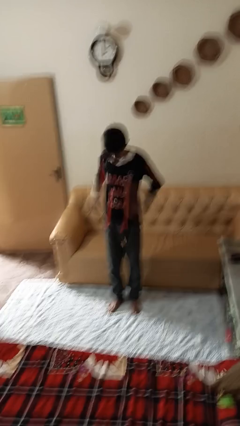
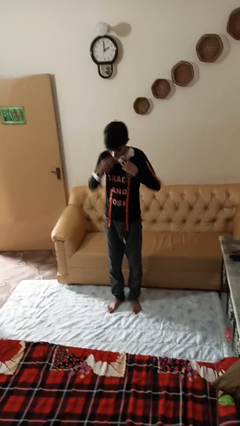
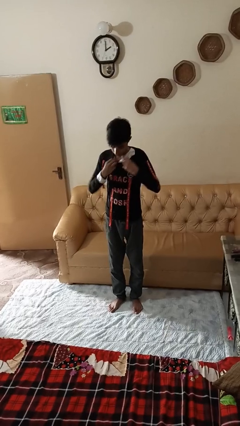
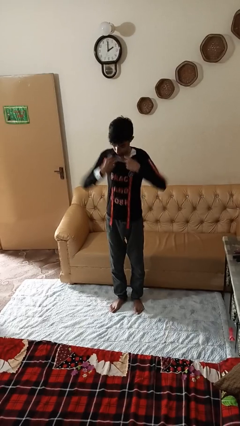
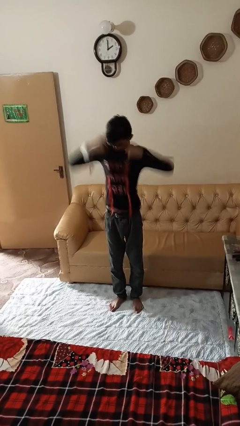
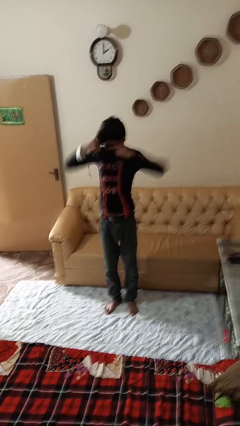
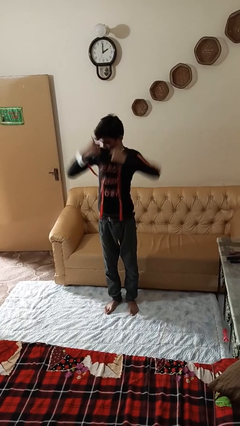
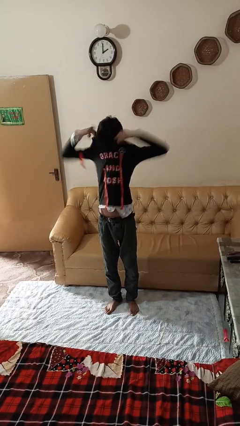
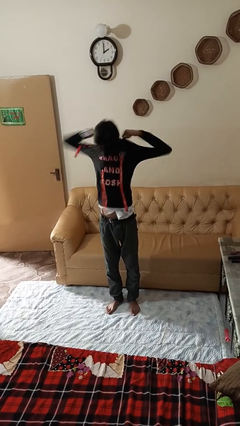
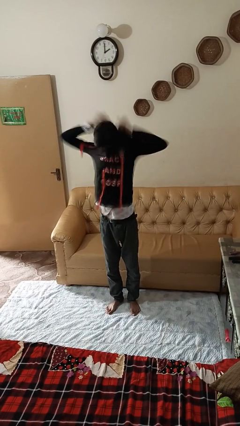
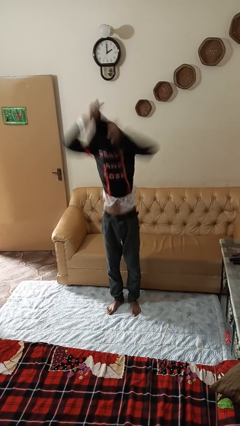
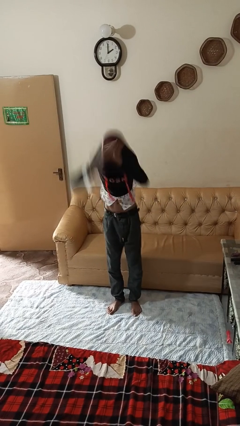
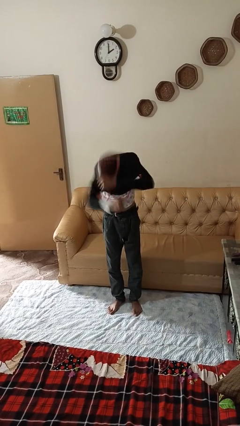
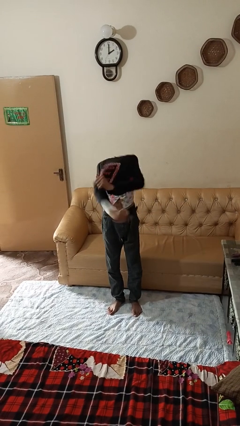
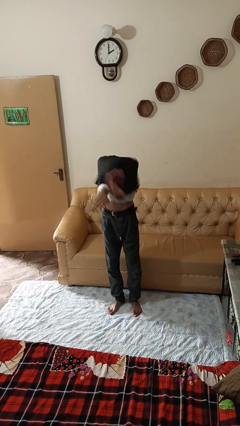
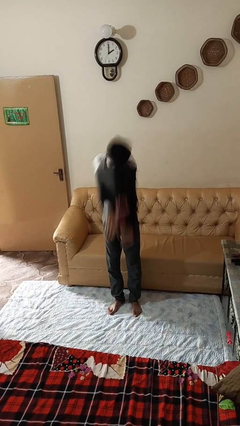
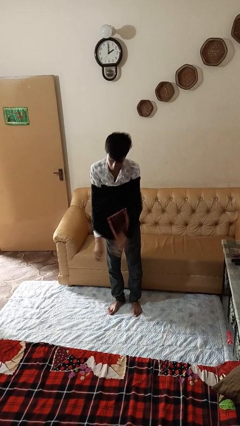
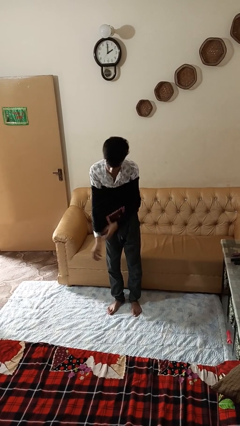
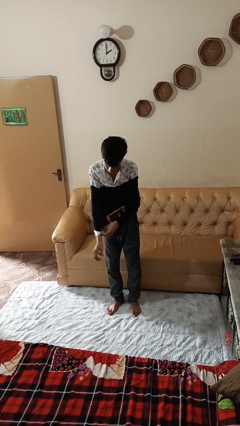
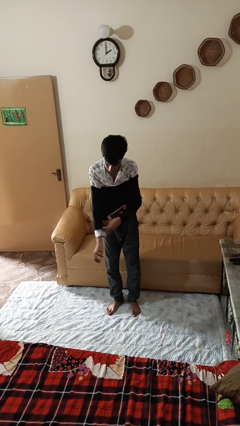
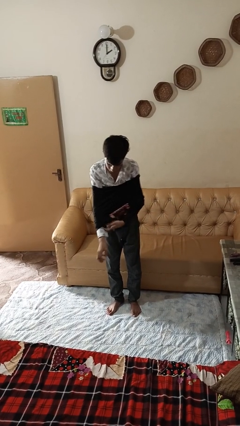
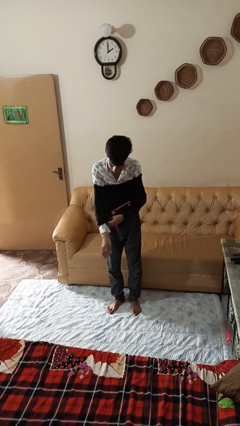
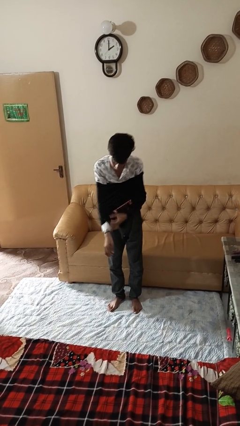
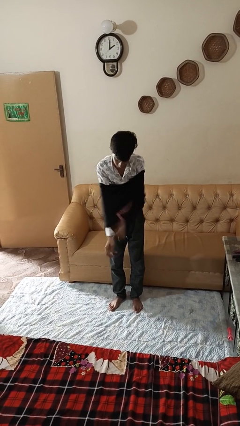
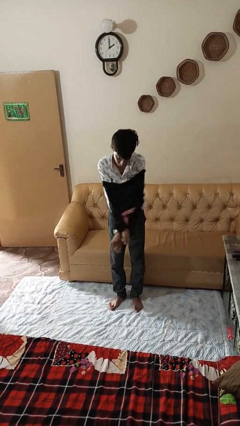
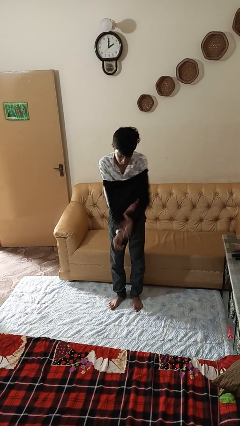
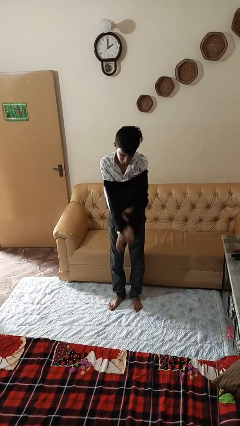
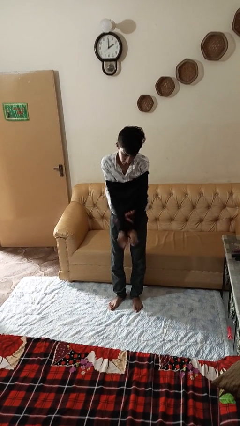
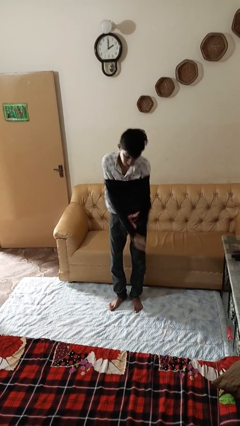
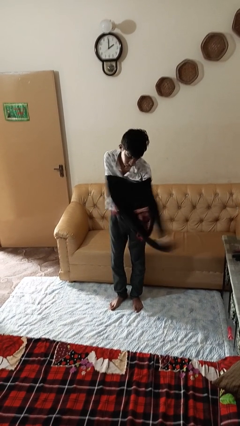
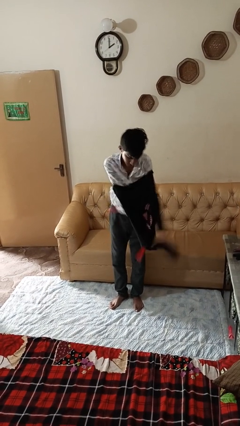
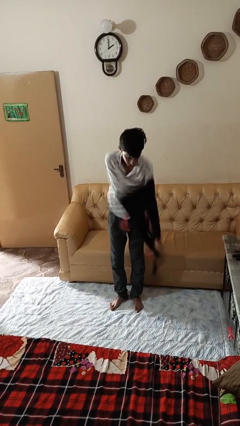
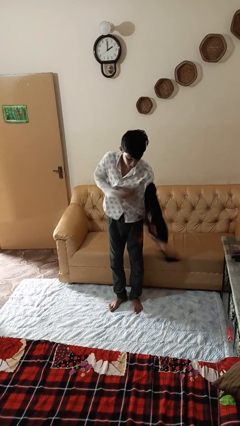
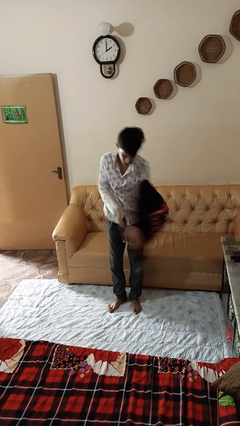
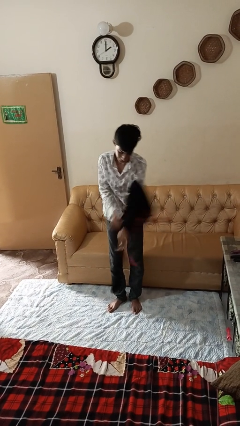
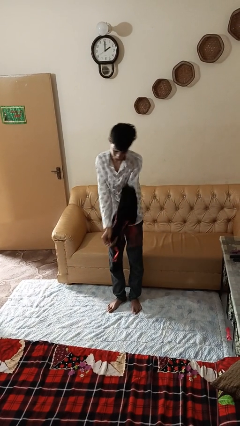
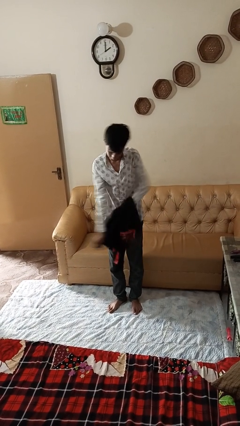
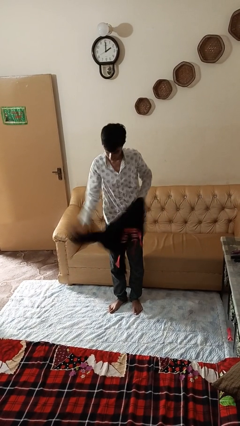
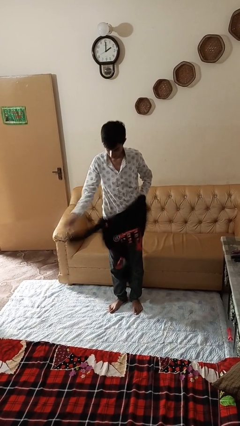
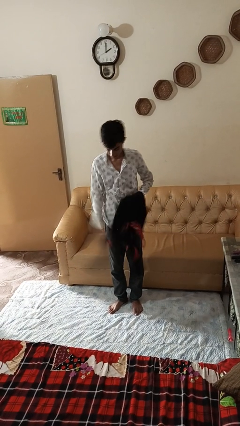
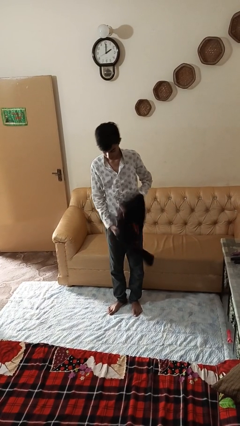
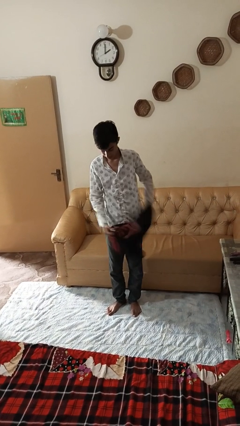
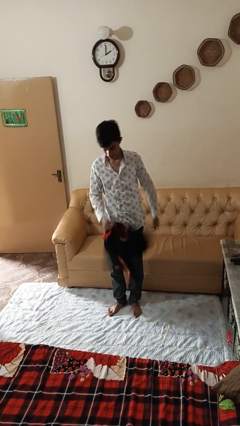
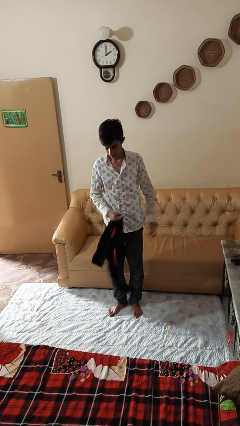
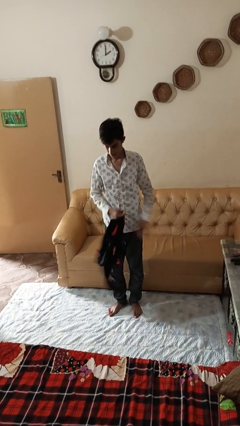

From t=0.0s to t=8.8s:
person takes off shirt

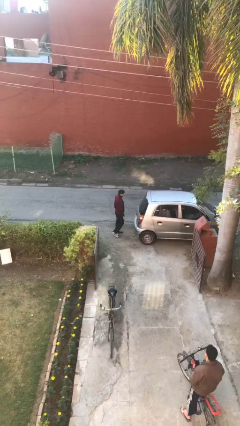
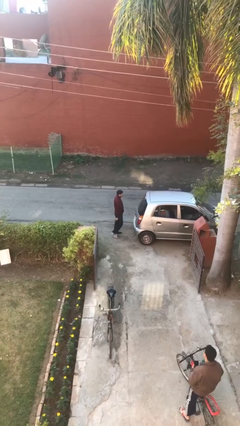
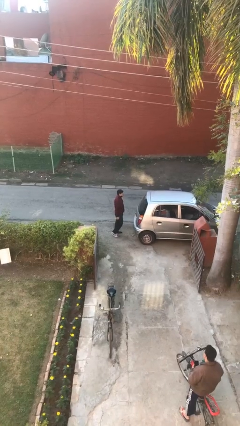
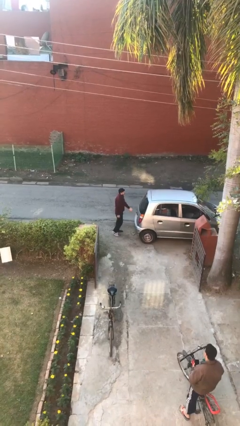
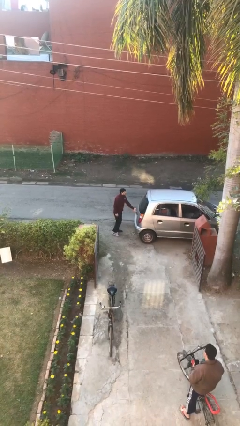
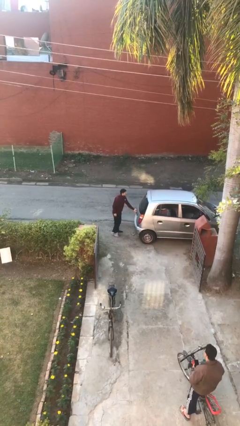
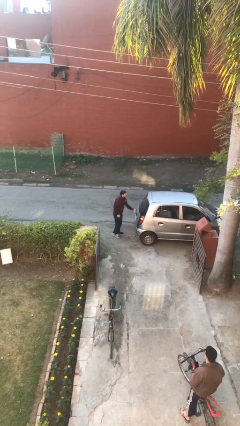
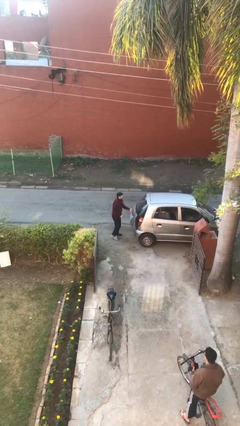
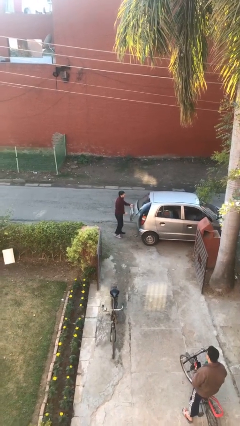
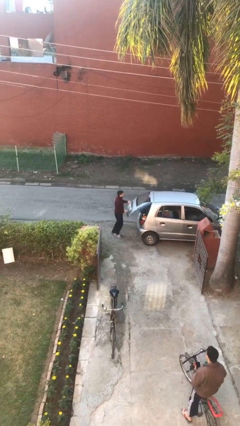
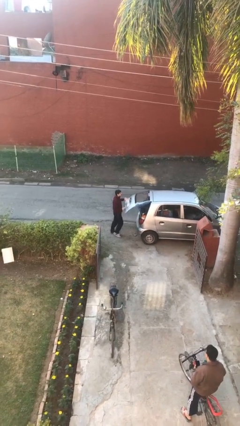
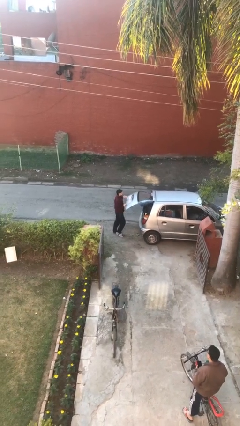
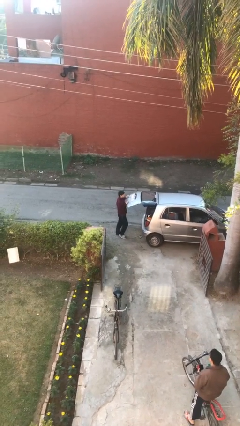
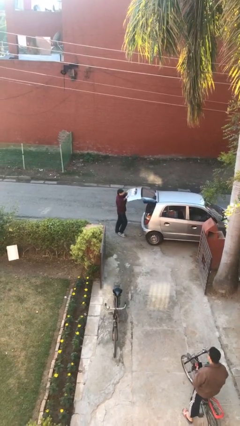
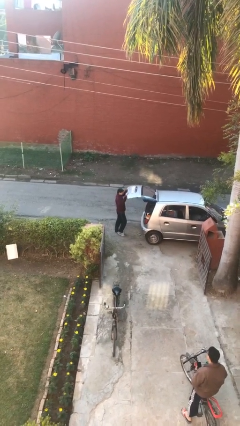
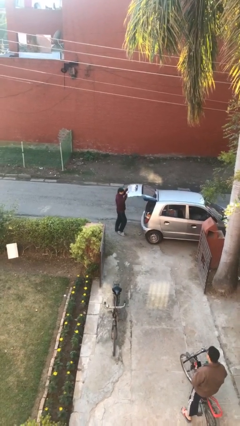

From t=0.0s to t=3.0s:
person opens car trunk

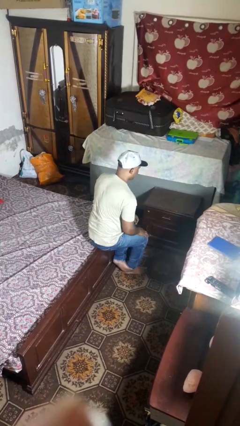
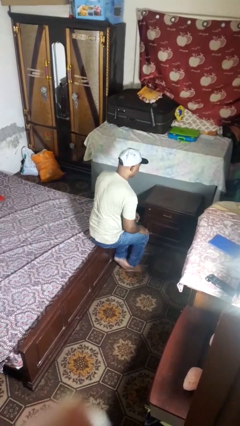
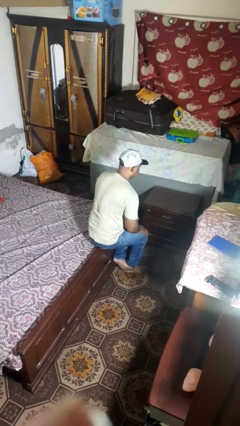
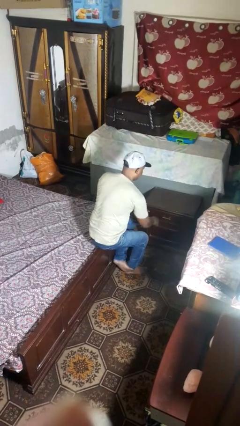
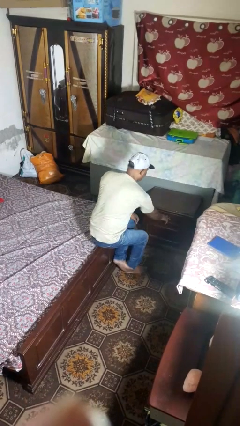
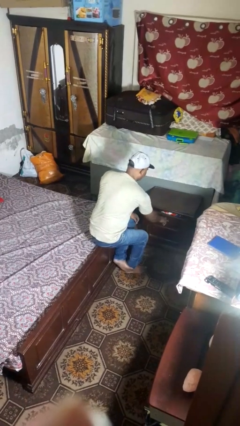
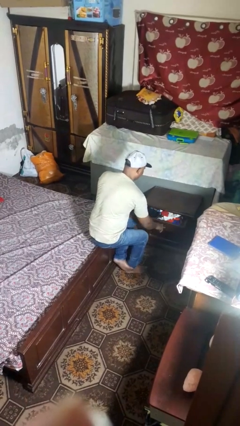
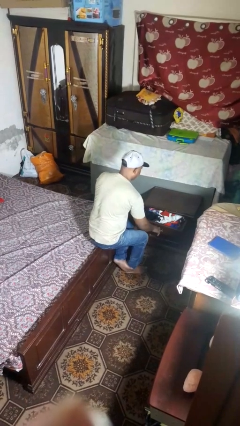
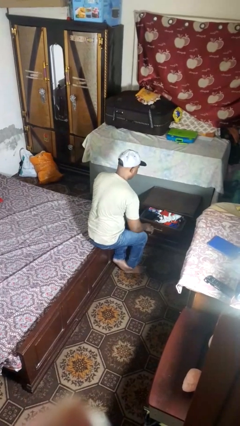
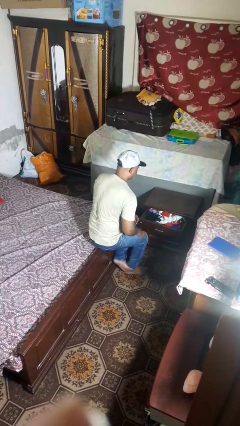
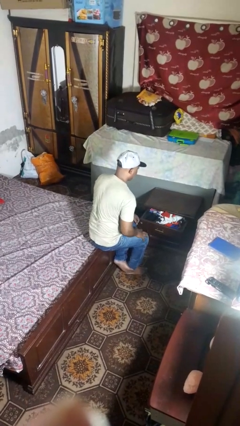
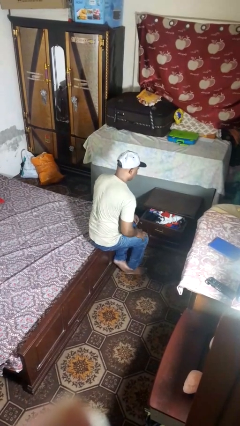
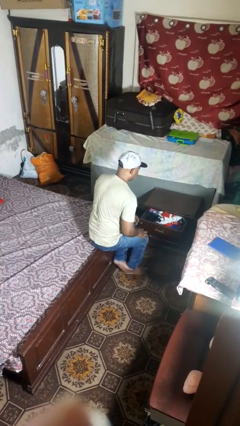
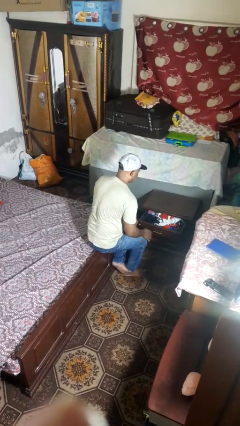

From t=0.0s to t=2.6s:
person opens dresser drawer

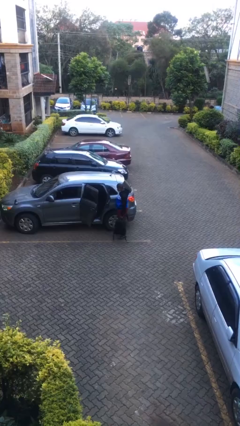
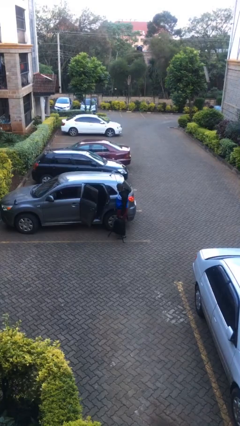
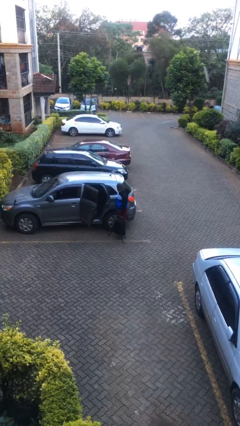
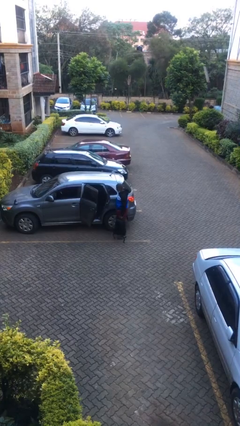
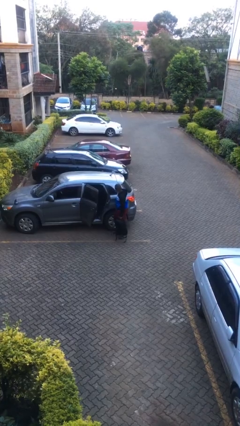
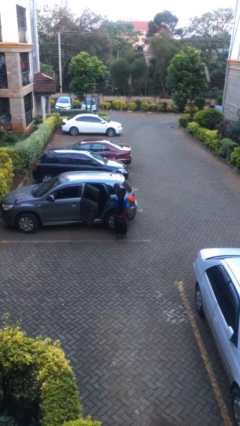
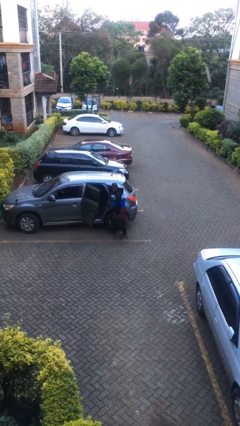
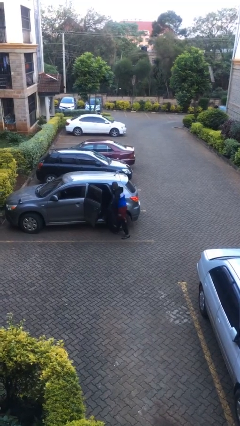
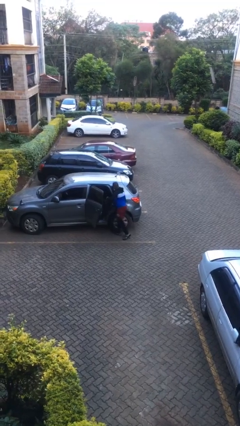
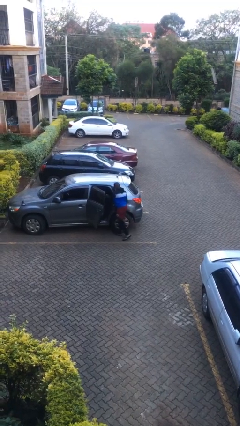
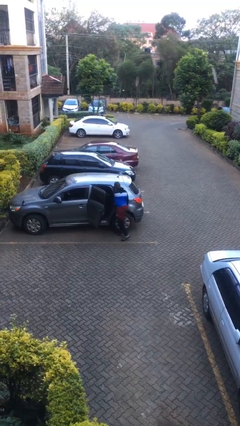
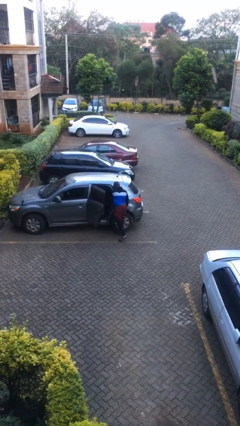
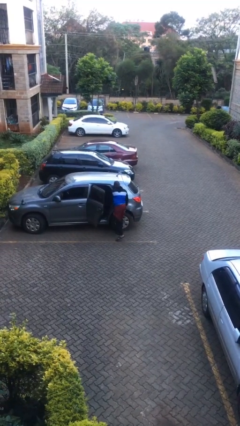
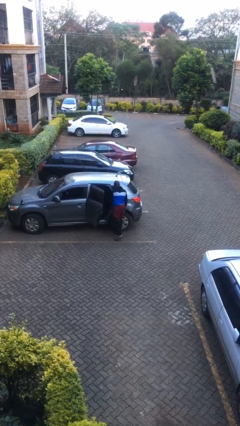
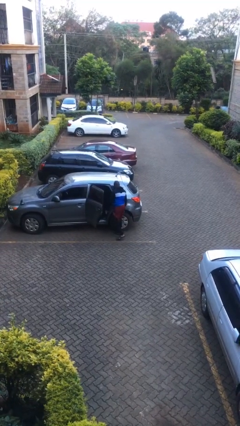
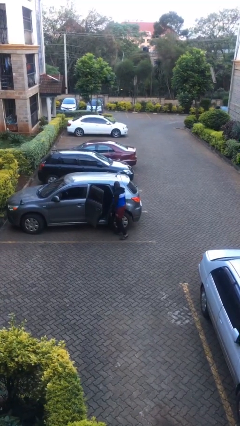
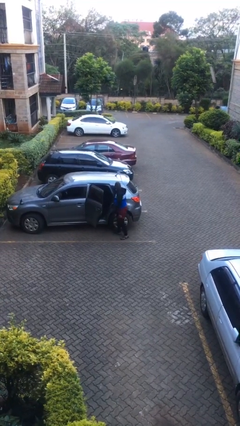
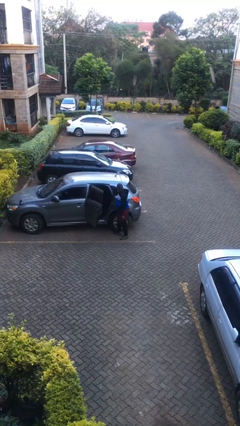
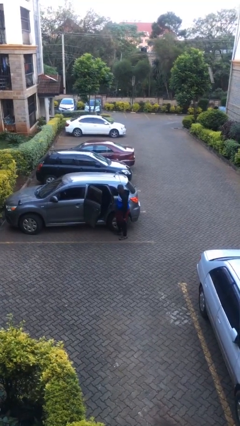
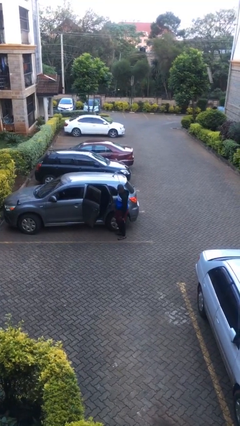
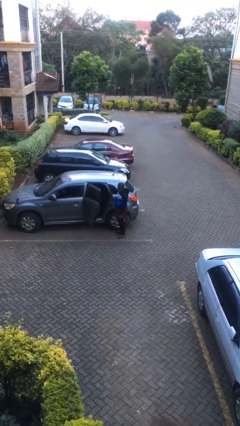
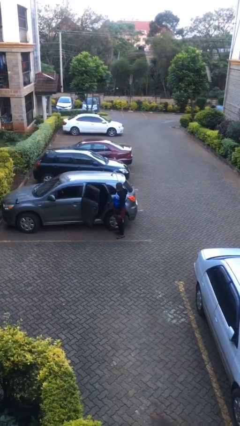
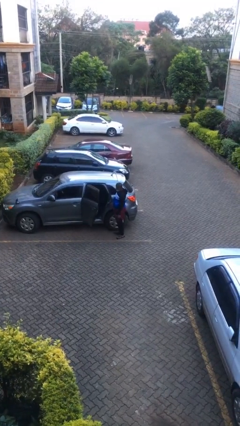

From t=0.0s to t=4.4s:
person loads car
